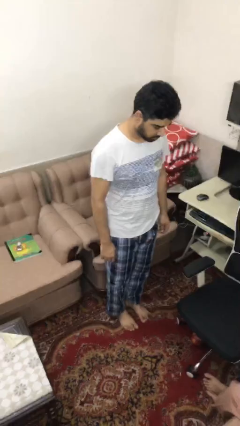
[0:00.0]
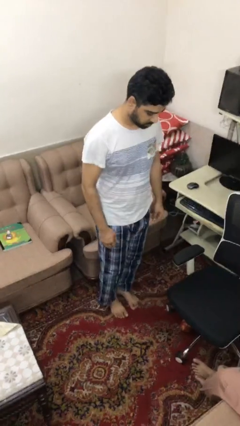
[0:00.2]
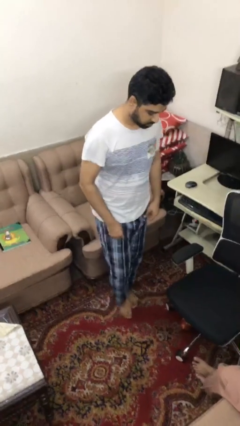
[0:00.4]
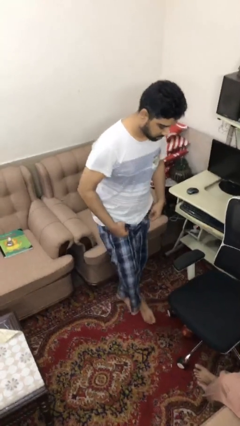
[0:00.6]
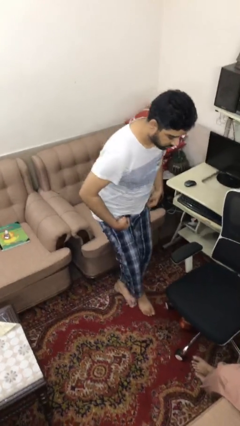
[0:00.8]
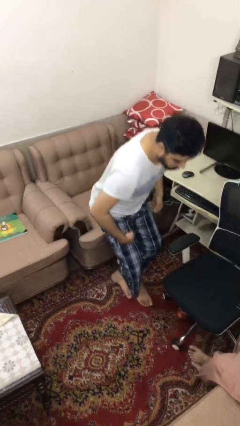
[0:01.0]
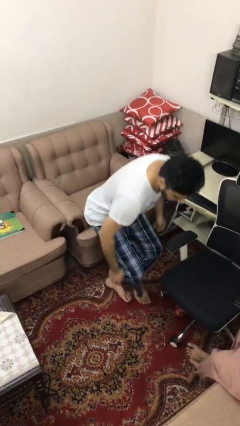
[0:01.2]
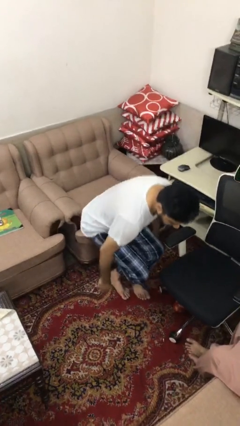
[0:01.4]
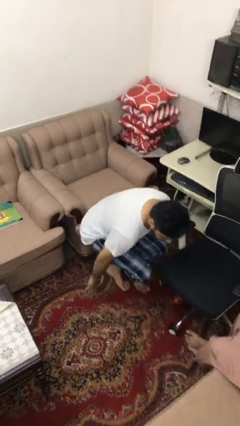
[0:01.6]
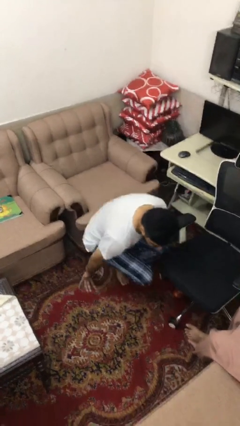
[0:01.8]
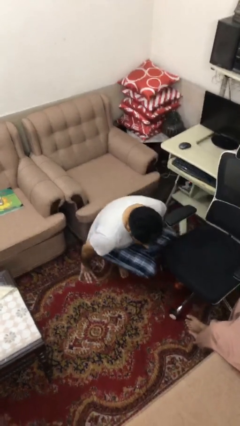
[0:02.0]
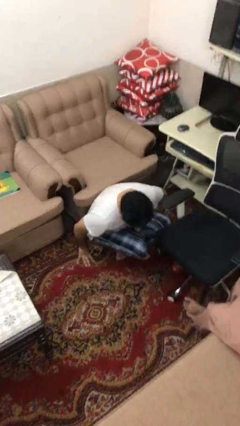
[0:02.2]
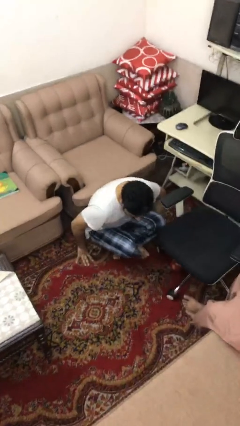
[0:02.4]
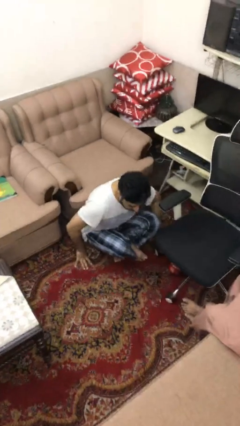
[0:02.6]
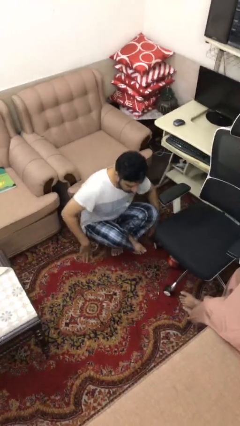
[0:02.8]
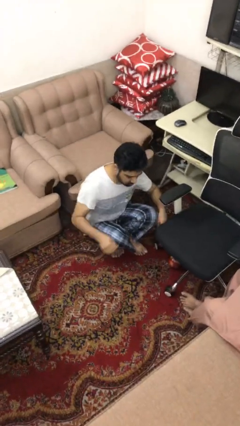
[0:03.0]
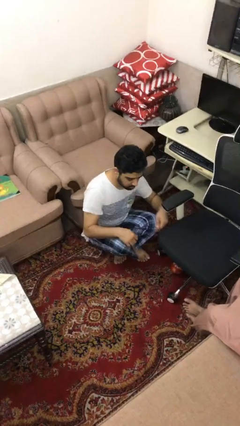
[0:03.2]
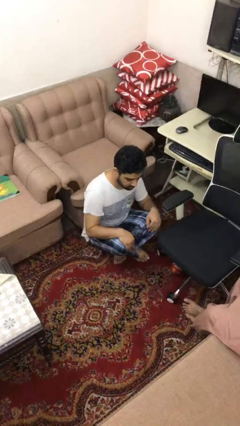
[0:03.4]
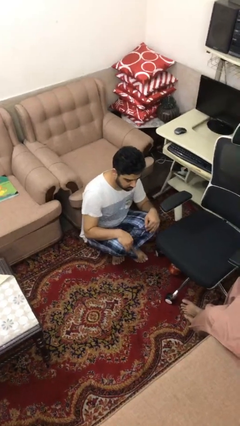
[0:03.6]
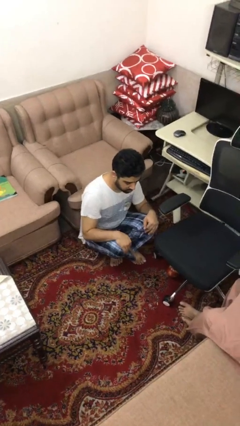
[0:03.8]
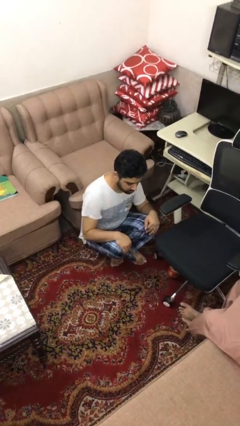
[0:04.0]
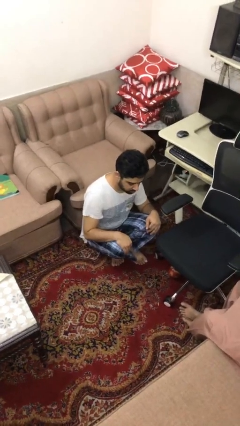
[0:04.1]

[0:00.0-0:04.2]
person sits crisscross

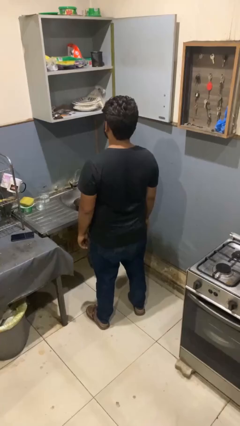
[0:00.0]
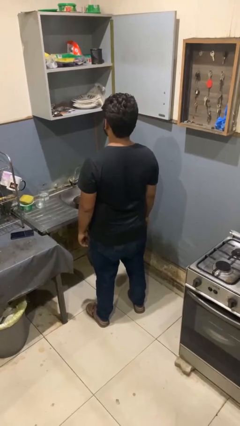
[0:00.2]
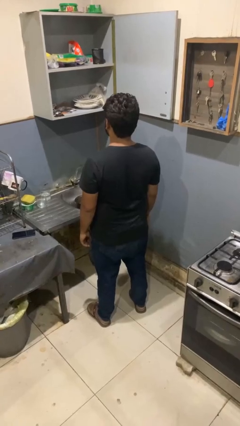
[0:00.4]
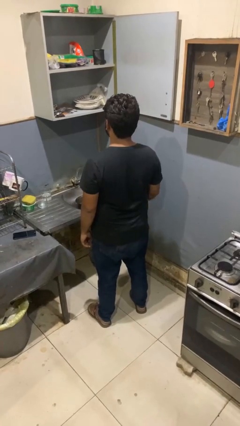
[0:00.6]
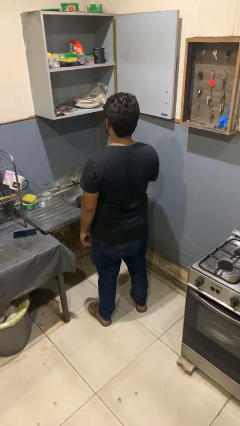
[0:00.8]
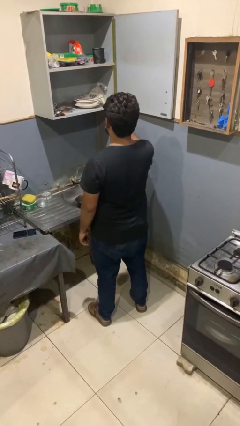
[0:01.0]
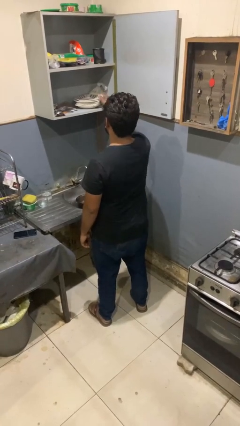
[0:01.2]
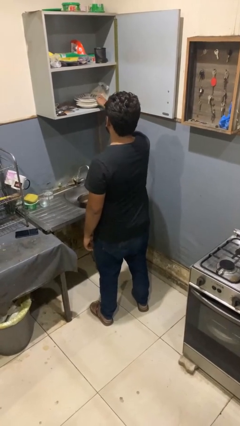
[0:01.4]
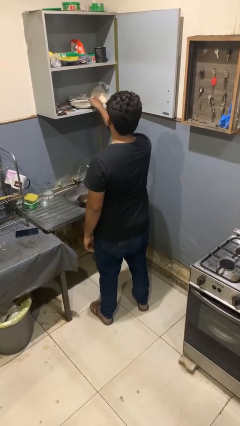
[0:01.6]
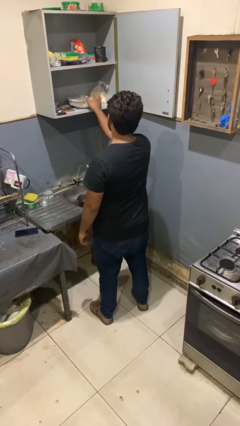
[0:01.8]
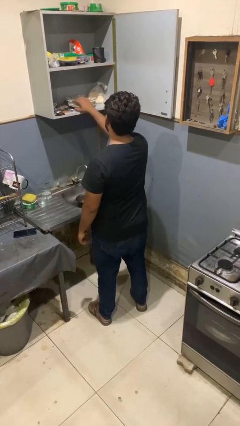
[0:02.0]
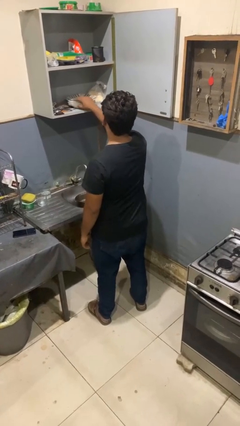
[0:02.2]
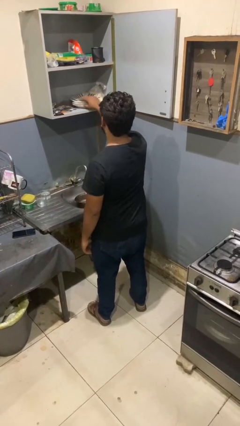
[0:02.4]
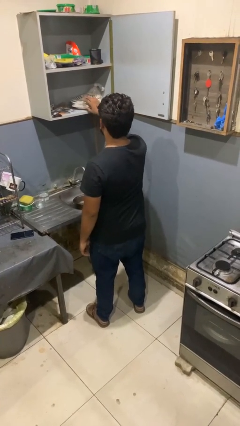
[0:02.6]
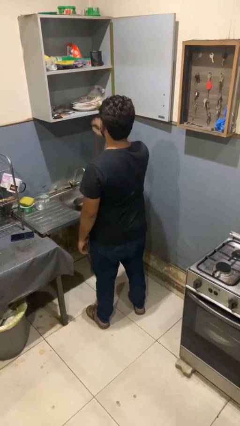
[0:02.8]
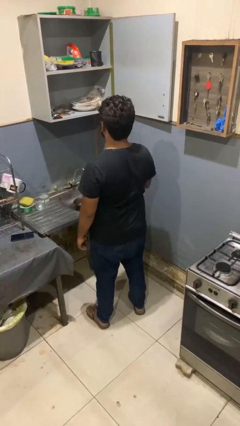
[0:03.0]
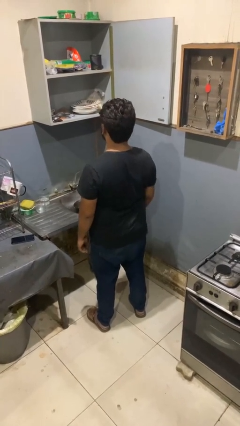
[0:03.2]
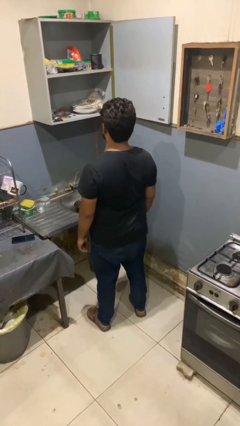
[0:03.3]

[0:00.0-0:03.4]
person searches in kitchen drawer

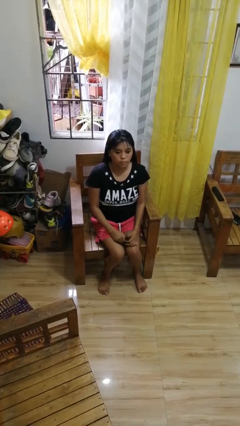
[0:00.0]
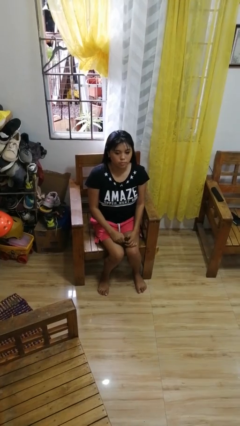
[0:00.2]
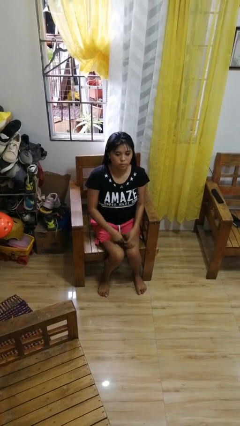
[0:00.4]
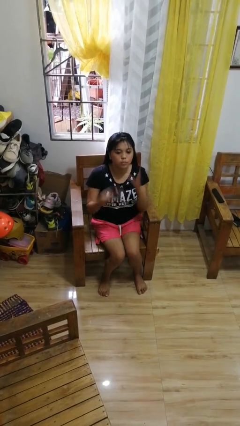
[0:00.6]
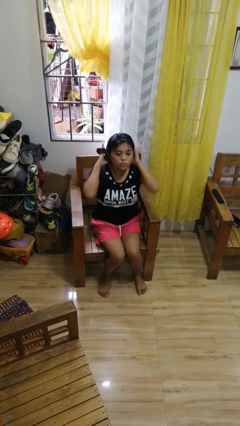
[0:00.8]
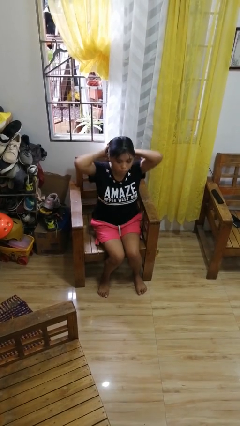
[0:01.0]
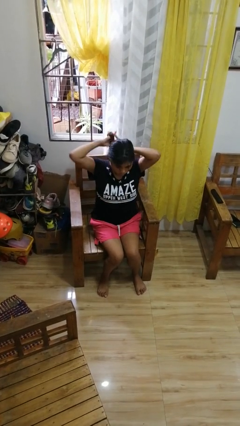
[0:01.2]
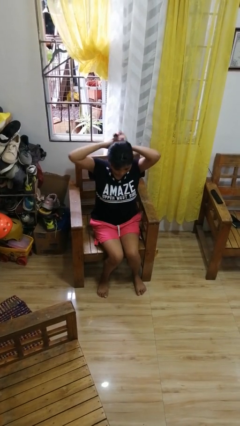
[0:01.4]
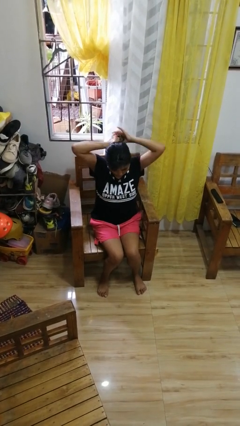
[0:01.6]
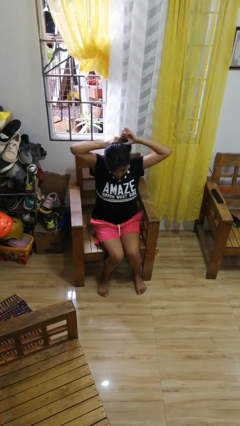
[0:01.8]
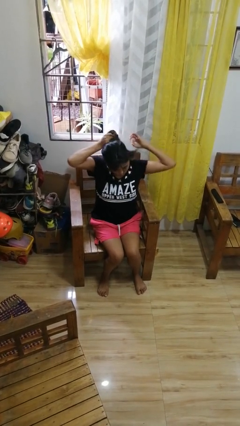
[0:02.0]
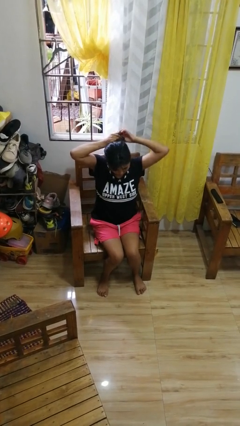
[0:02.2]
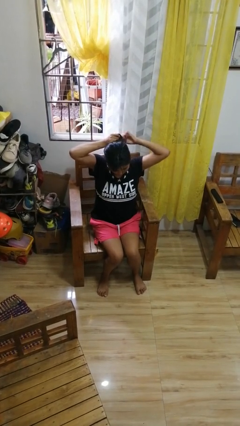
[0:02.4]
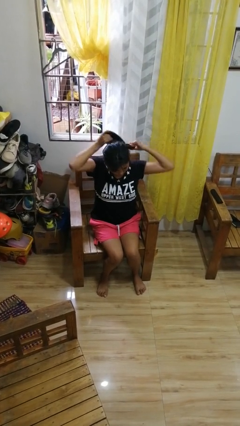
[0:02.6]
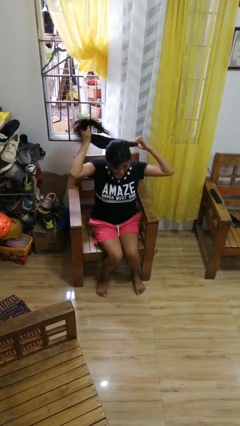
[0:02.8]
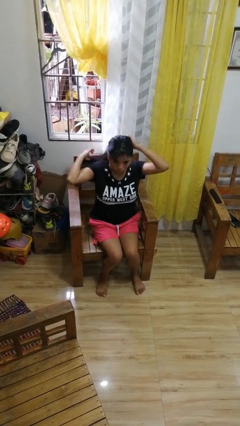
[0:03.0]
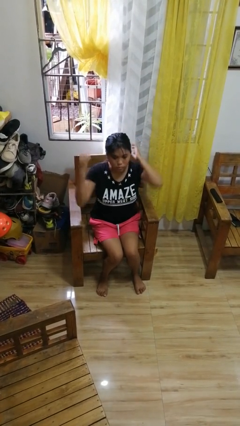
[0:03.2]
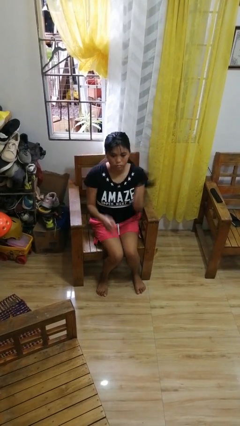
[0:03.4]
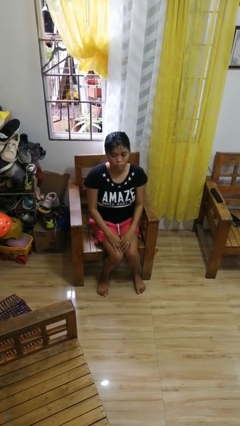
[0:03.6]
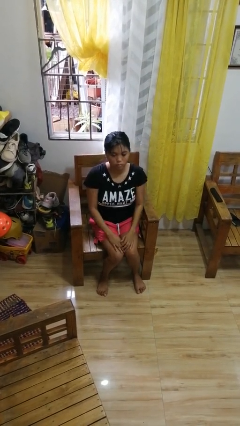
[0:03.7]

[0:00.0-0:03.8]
person puts hair in ponytail

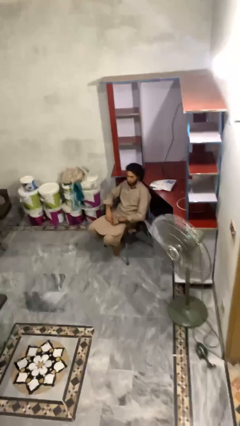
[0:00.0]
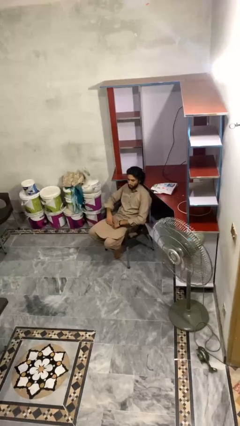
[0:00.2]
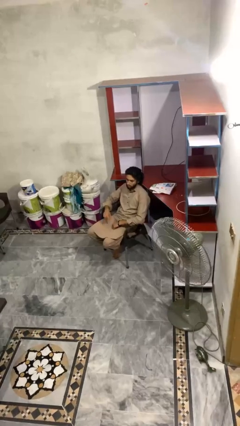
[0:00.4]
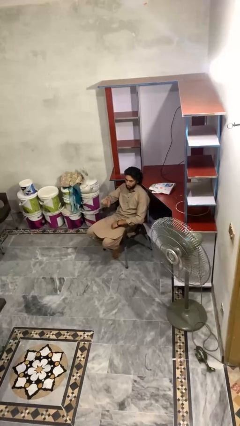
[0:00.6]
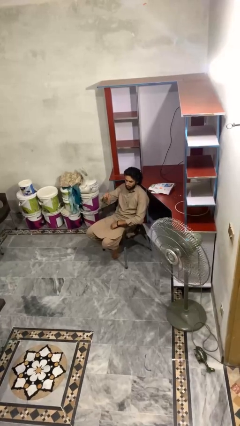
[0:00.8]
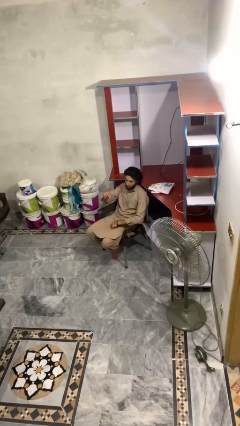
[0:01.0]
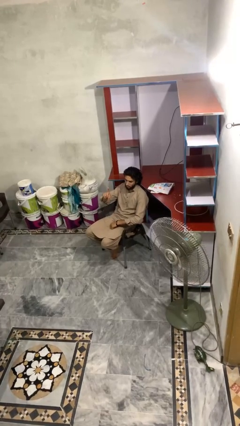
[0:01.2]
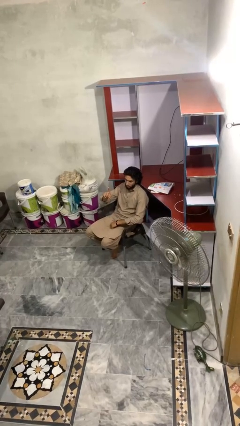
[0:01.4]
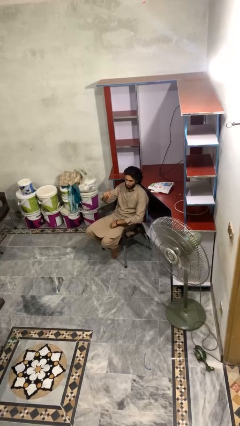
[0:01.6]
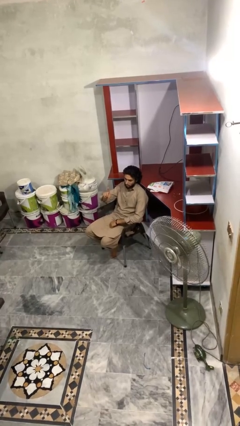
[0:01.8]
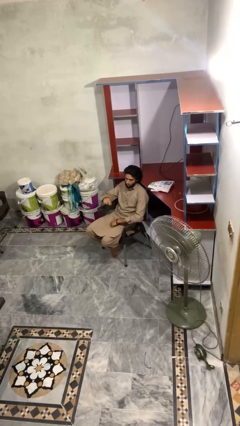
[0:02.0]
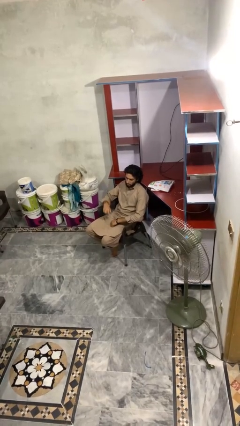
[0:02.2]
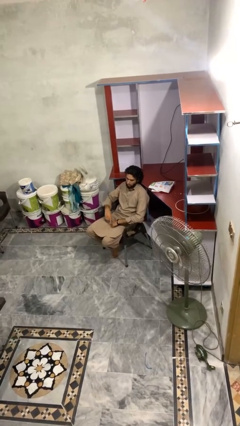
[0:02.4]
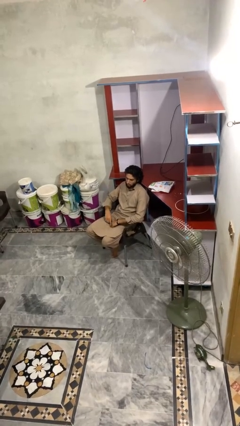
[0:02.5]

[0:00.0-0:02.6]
person gestures number one

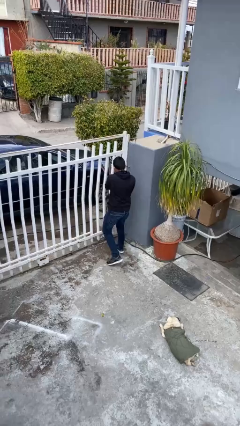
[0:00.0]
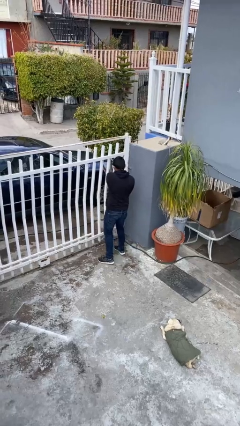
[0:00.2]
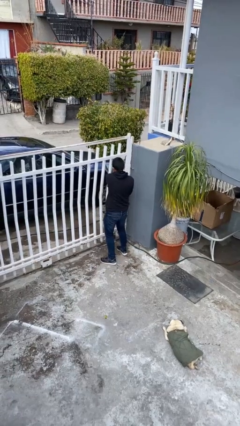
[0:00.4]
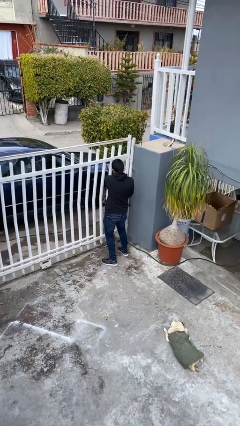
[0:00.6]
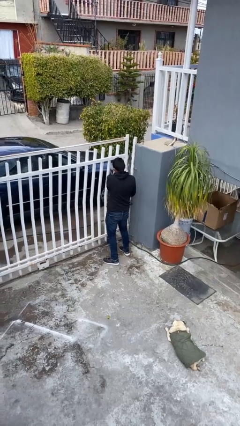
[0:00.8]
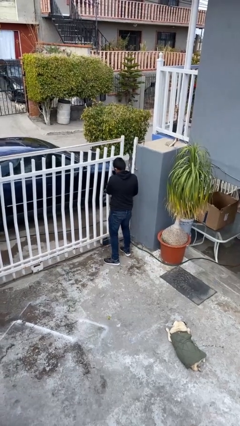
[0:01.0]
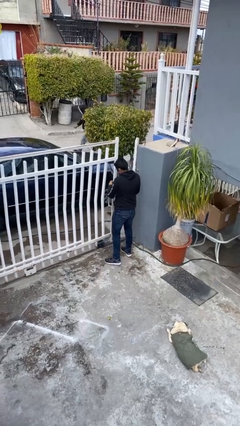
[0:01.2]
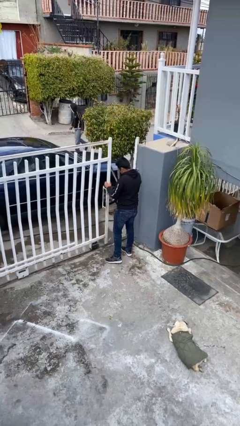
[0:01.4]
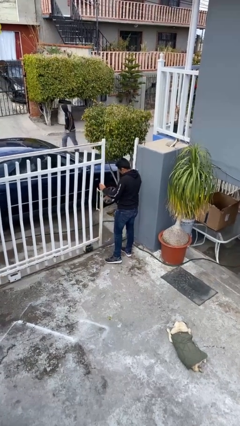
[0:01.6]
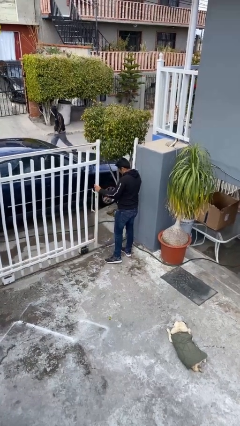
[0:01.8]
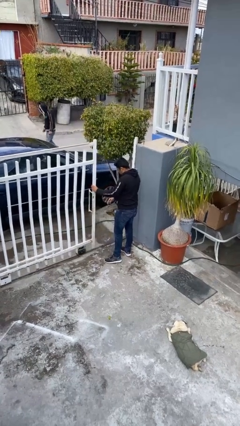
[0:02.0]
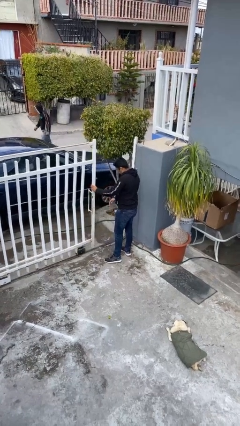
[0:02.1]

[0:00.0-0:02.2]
person opens facility door

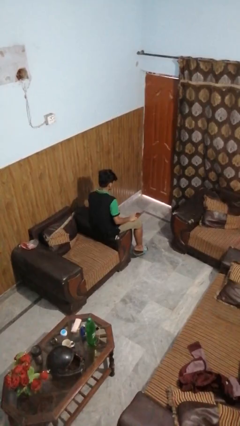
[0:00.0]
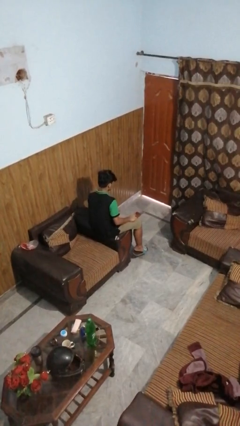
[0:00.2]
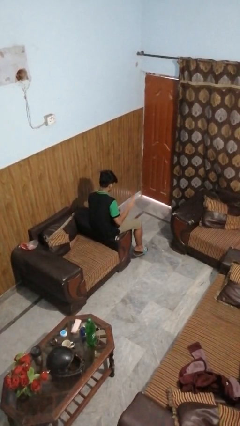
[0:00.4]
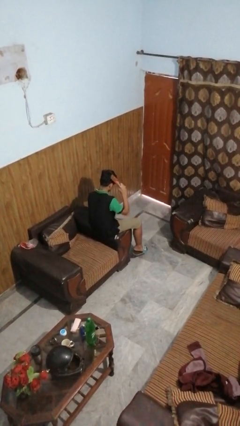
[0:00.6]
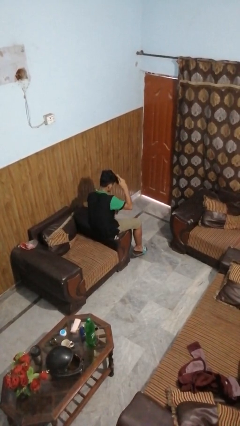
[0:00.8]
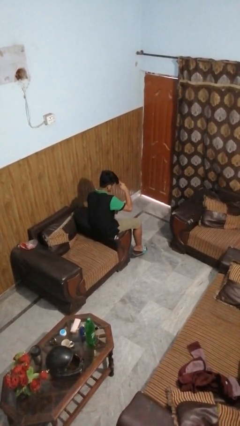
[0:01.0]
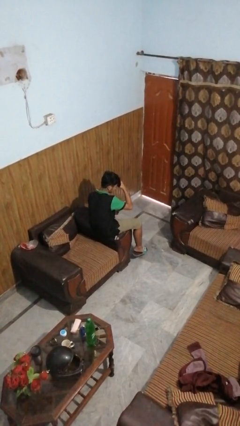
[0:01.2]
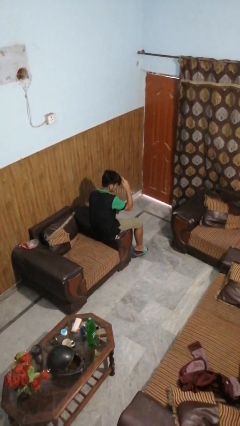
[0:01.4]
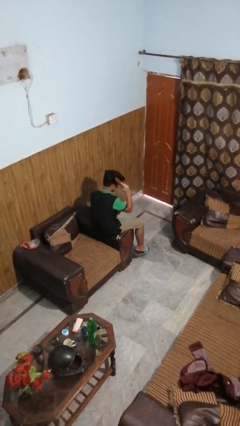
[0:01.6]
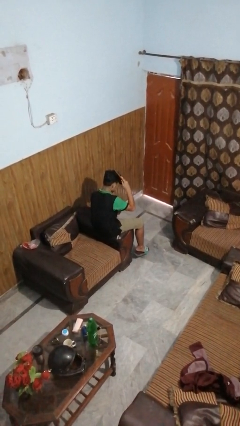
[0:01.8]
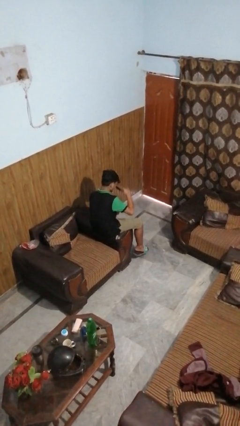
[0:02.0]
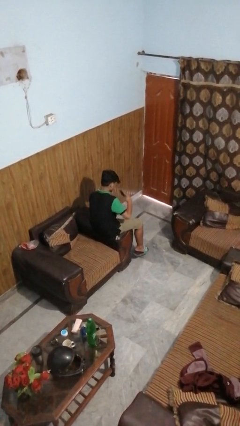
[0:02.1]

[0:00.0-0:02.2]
person brushes hair
